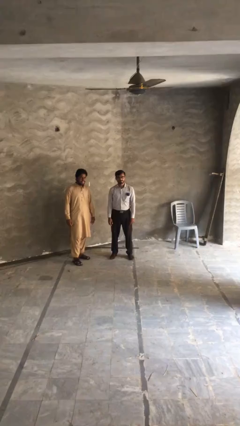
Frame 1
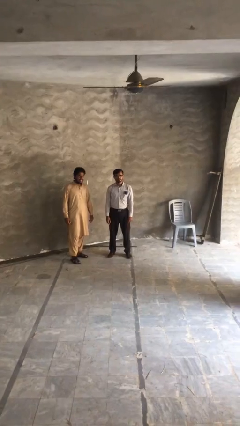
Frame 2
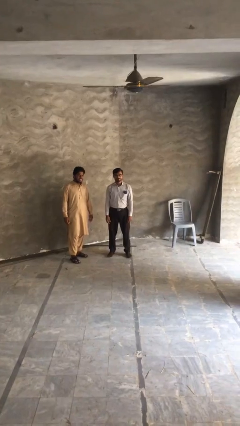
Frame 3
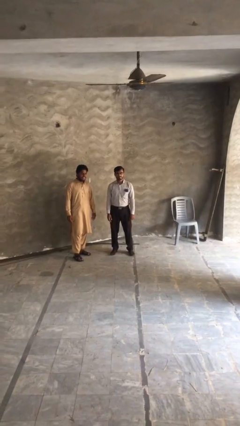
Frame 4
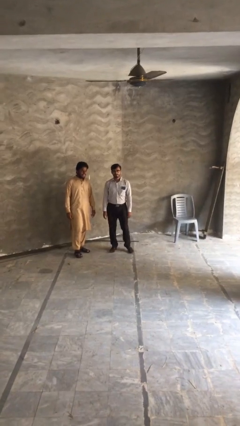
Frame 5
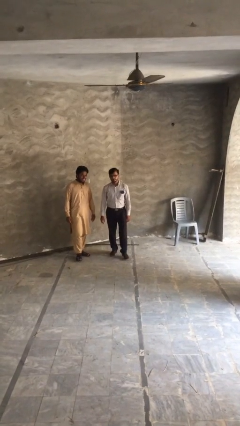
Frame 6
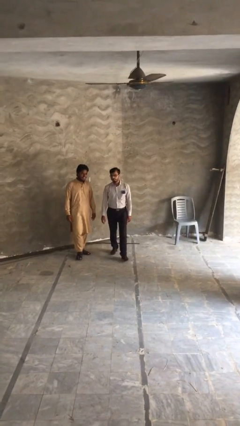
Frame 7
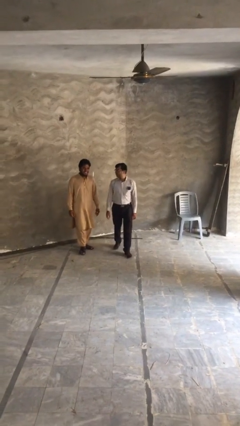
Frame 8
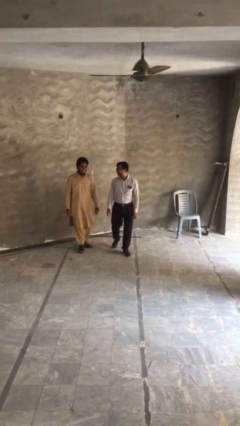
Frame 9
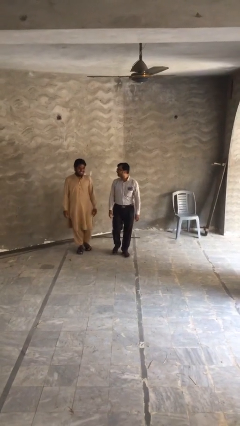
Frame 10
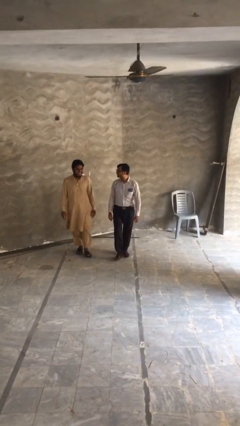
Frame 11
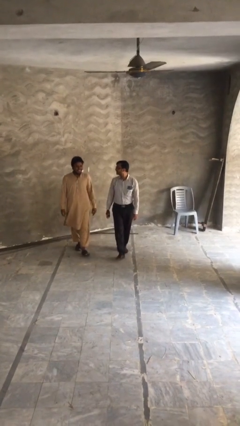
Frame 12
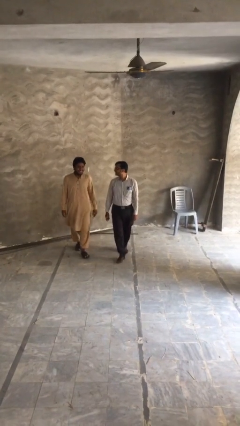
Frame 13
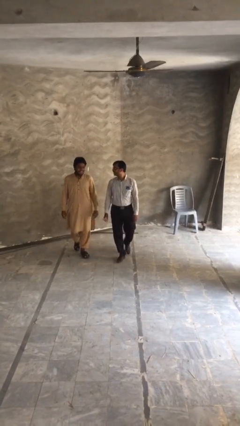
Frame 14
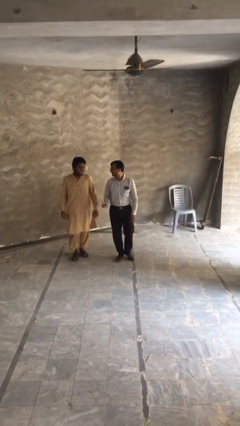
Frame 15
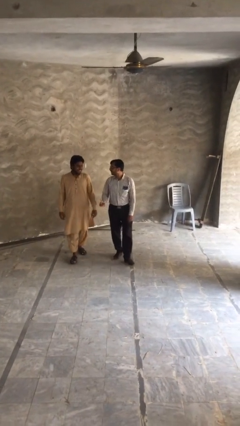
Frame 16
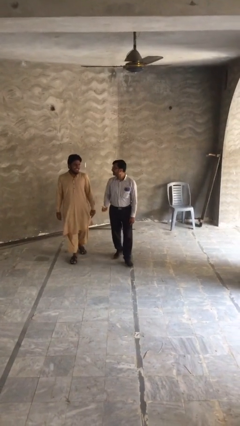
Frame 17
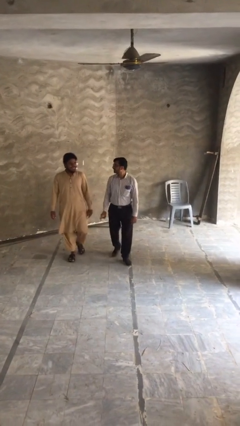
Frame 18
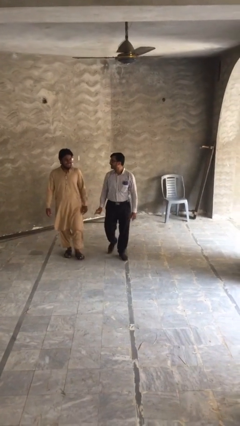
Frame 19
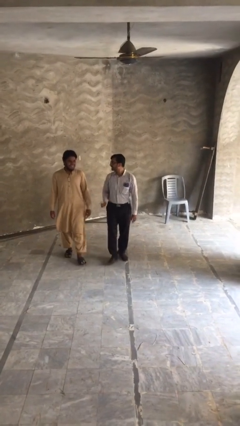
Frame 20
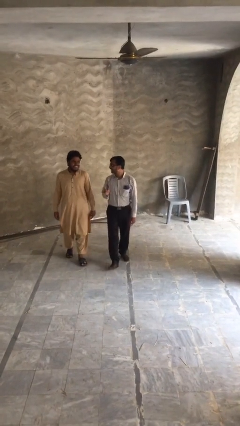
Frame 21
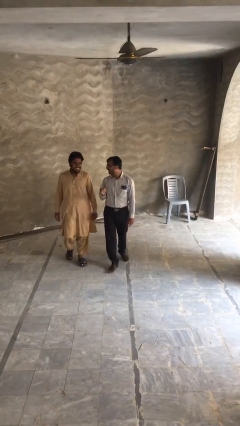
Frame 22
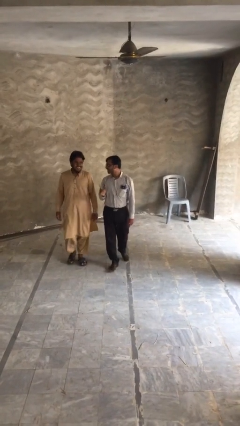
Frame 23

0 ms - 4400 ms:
person talks to person

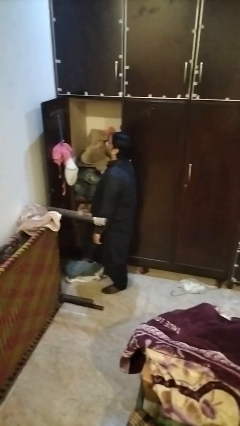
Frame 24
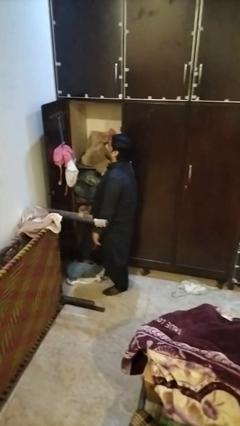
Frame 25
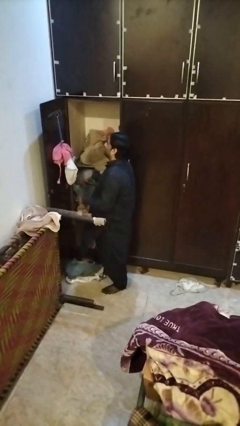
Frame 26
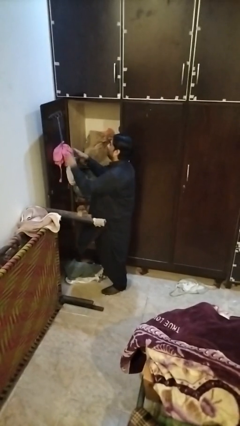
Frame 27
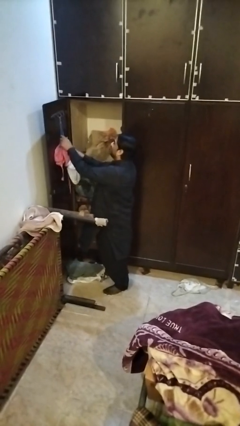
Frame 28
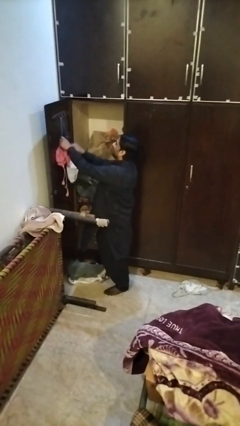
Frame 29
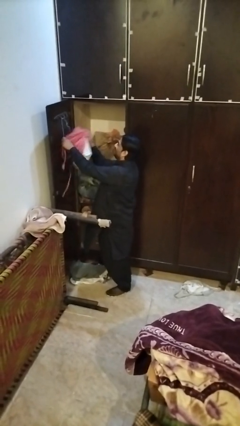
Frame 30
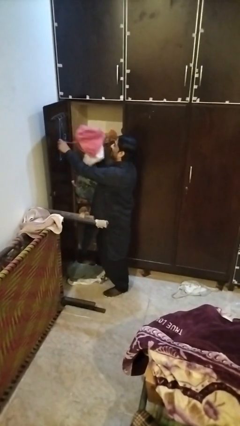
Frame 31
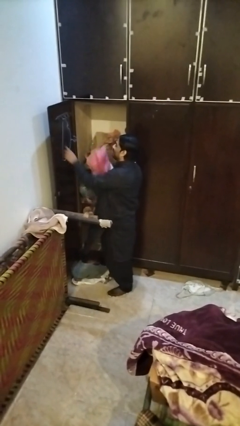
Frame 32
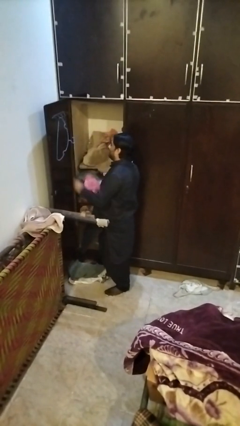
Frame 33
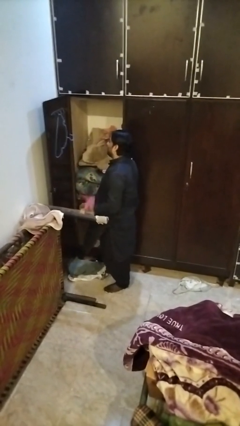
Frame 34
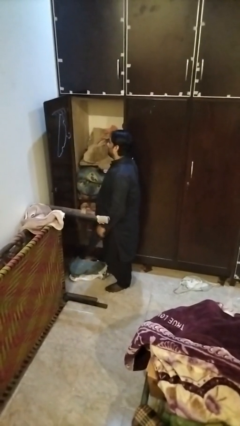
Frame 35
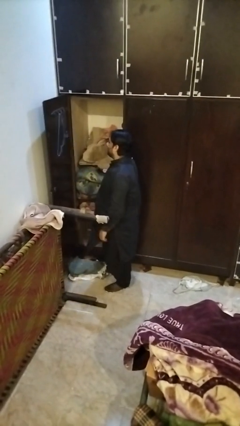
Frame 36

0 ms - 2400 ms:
person takes clothes from closet

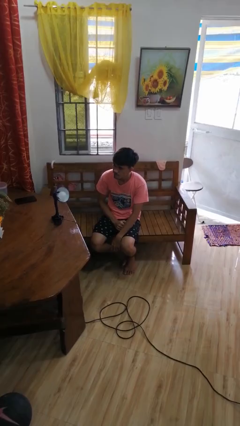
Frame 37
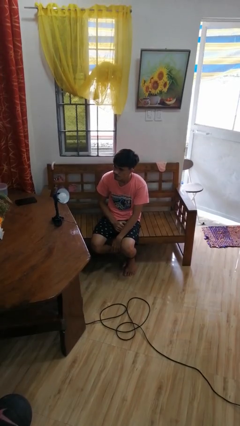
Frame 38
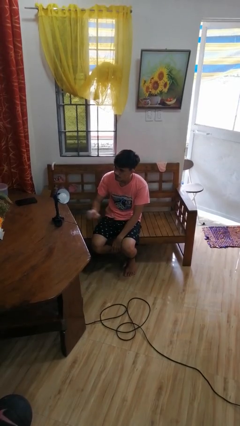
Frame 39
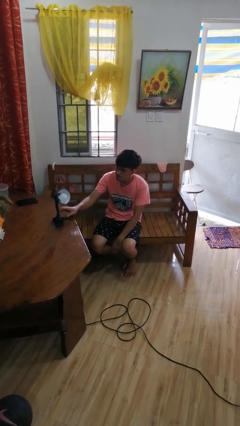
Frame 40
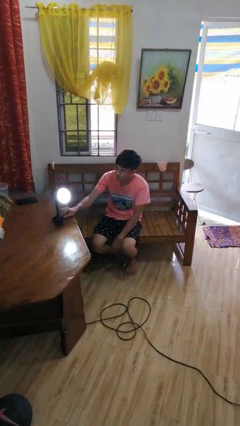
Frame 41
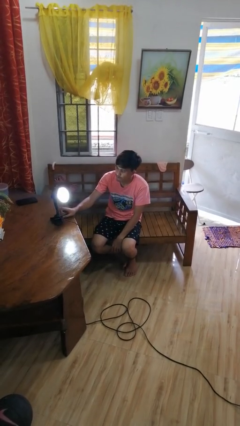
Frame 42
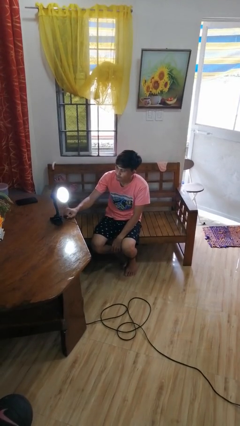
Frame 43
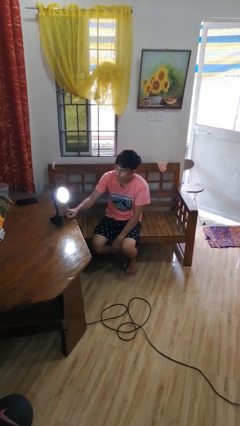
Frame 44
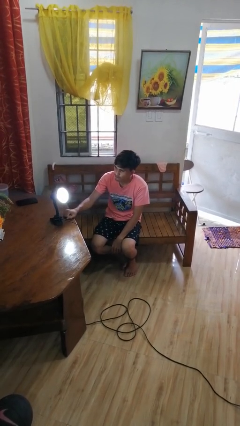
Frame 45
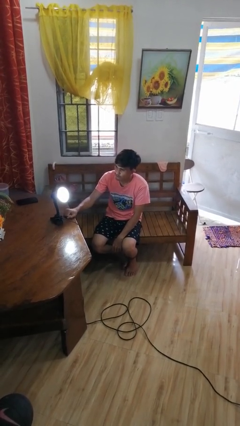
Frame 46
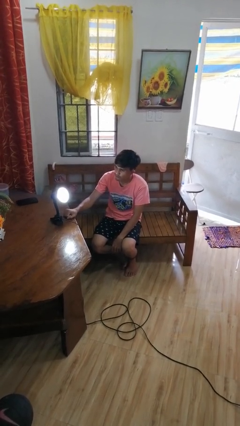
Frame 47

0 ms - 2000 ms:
person turns on lamp

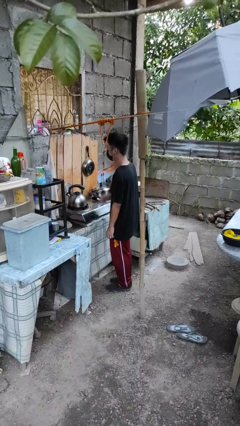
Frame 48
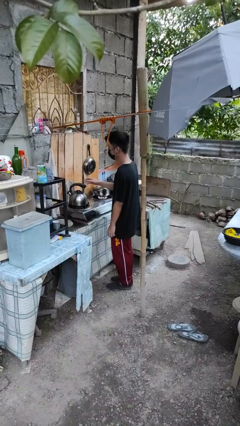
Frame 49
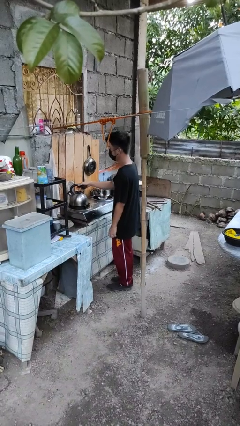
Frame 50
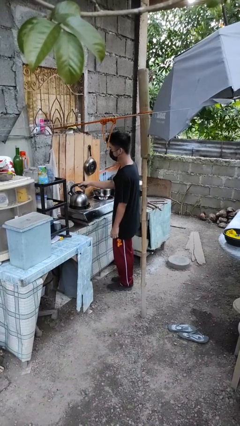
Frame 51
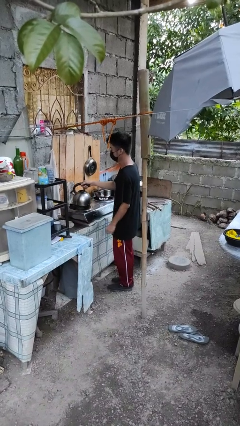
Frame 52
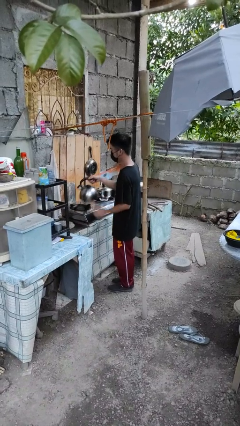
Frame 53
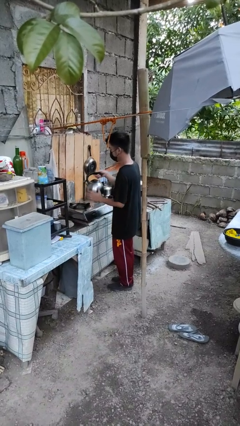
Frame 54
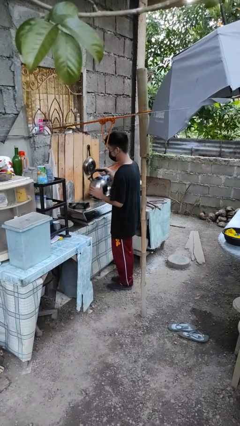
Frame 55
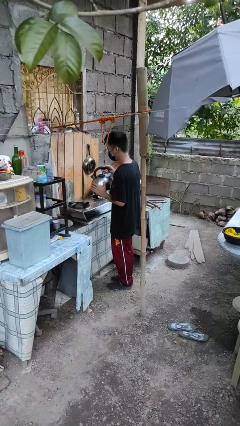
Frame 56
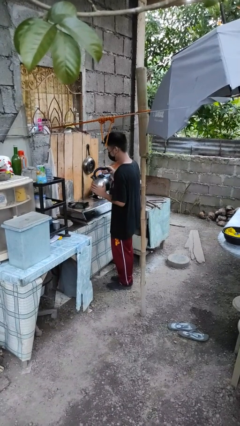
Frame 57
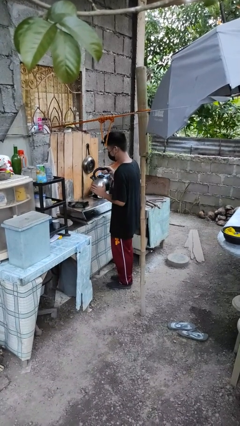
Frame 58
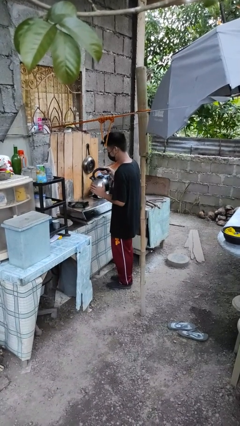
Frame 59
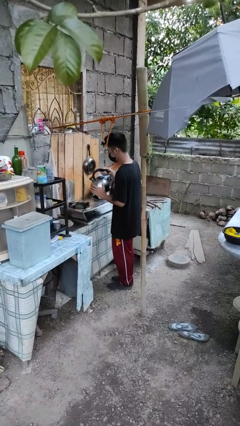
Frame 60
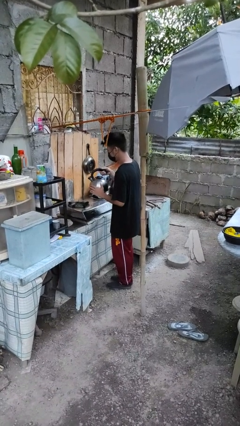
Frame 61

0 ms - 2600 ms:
person picks up object from countertop

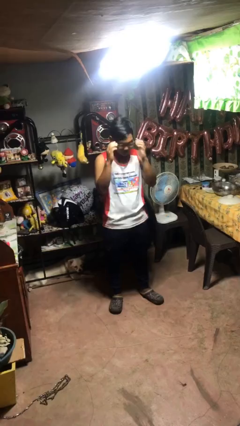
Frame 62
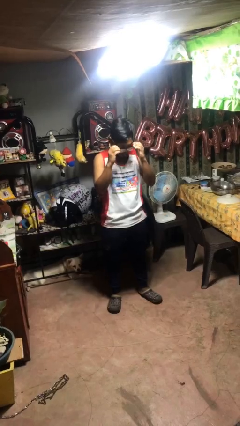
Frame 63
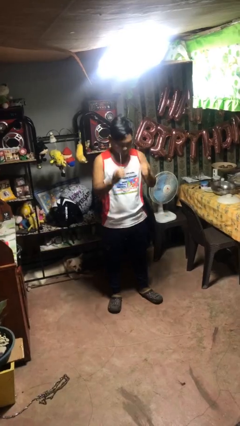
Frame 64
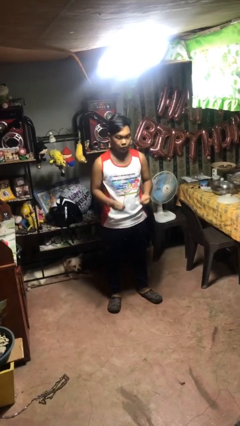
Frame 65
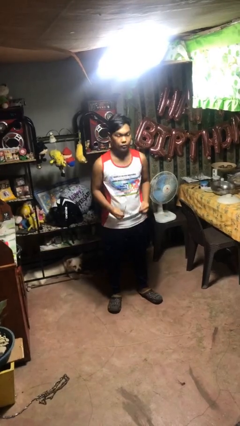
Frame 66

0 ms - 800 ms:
person takes off glasses

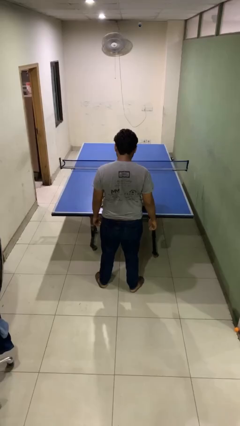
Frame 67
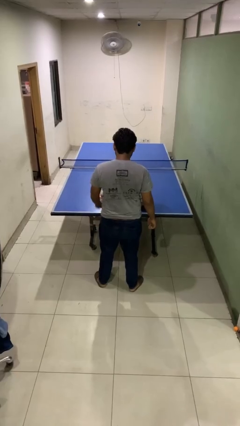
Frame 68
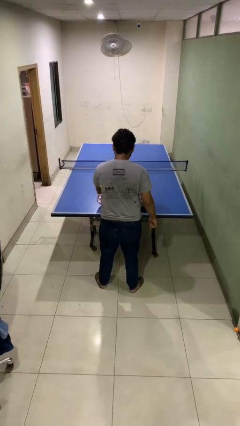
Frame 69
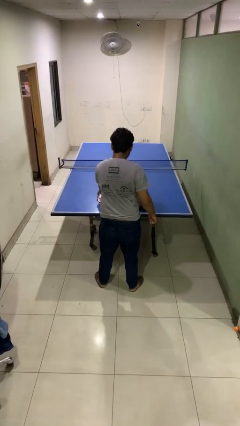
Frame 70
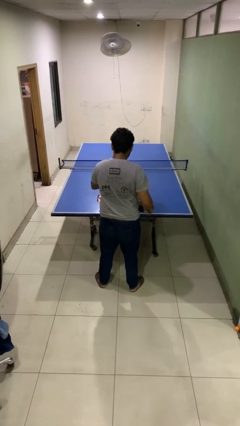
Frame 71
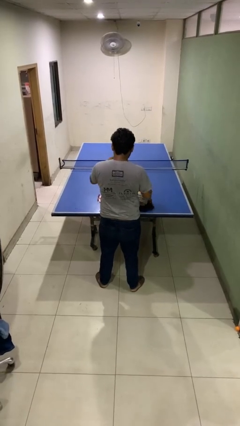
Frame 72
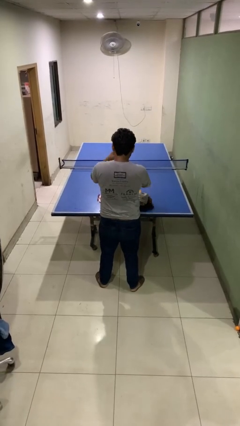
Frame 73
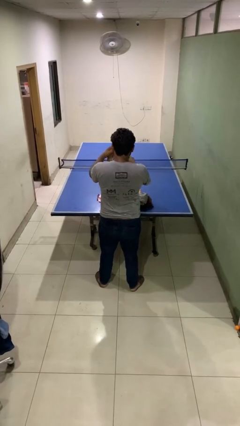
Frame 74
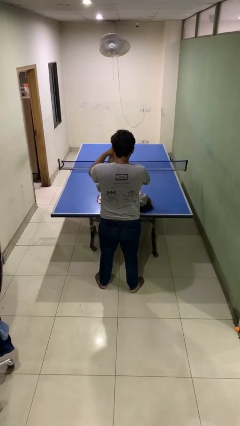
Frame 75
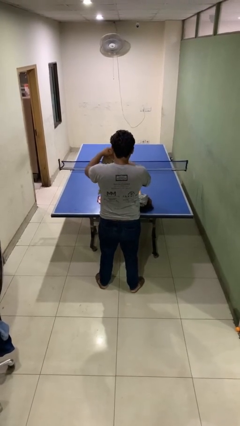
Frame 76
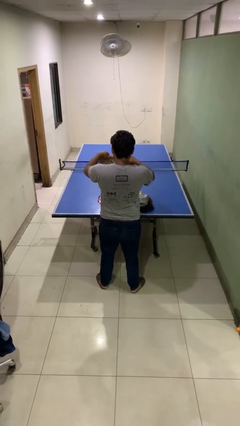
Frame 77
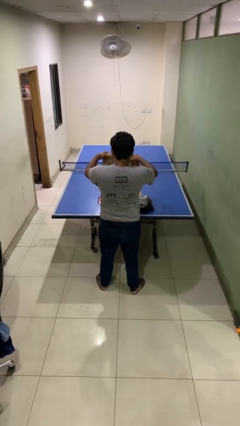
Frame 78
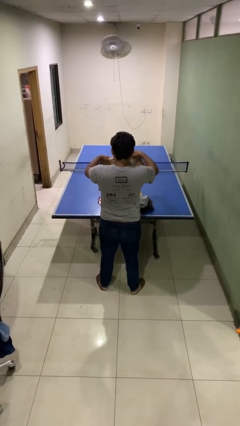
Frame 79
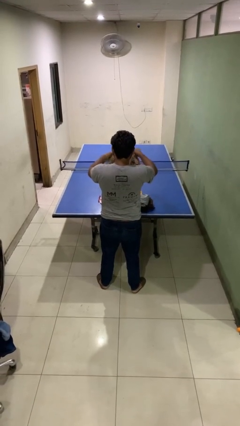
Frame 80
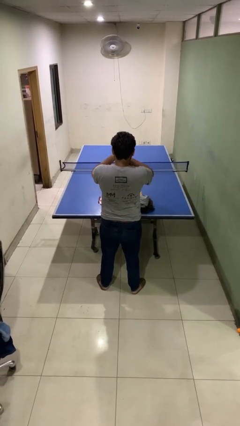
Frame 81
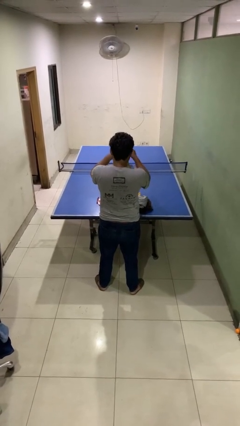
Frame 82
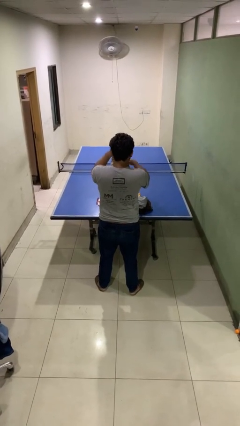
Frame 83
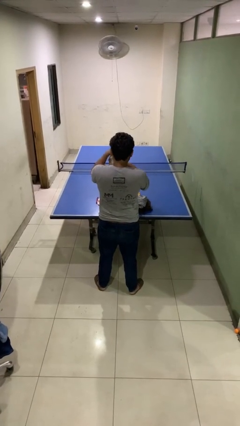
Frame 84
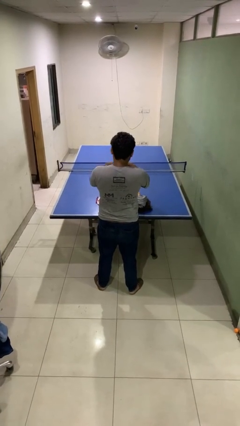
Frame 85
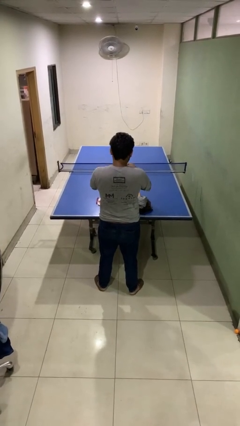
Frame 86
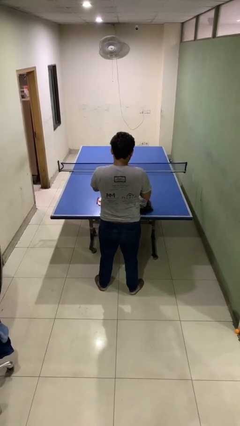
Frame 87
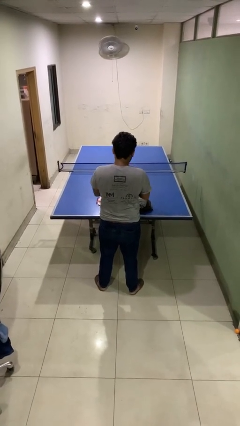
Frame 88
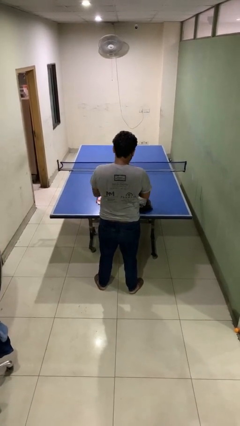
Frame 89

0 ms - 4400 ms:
person folds shirt

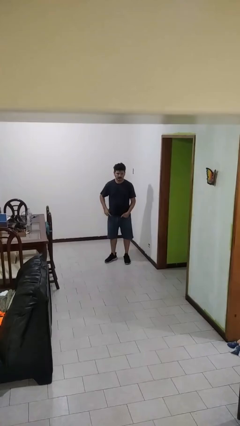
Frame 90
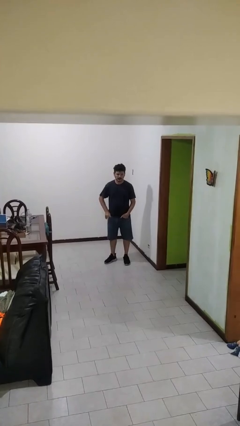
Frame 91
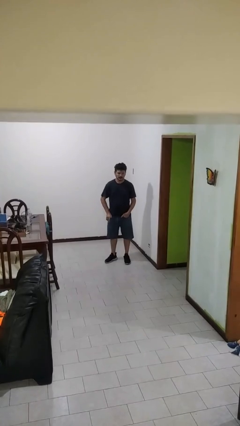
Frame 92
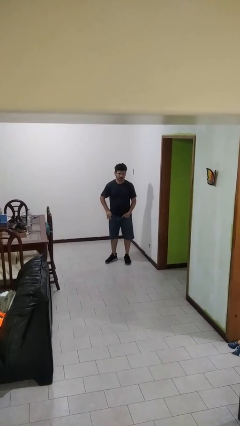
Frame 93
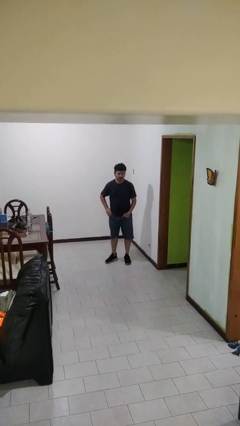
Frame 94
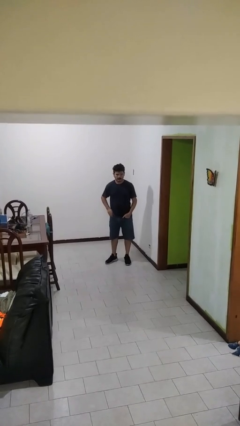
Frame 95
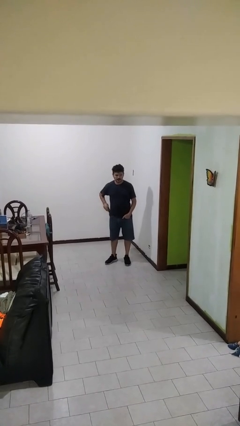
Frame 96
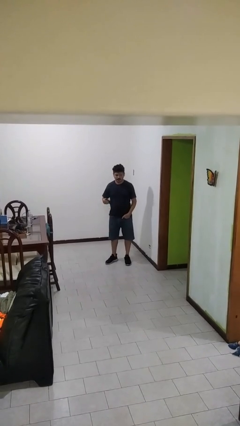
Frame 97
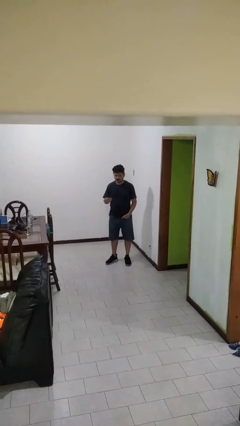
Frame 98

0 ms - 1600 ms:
person takes phone from pocket
